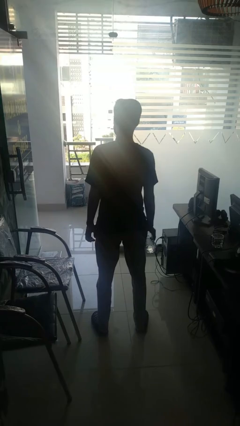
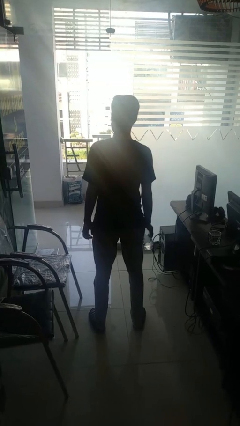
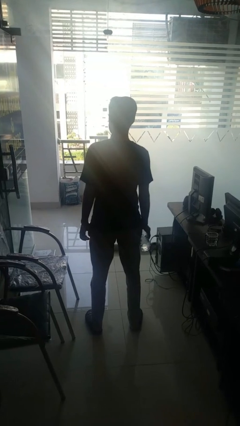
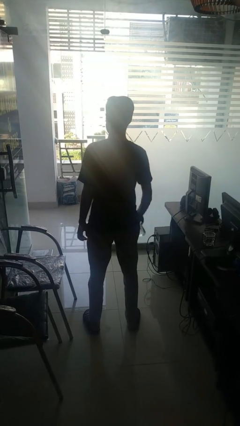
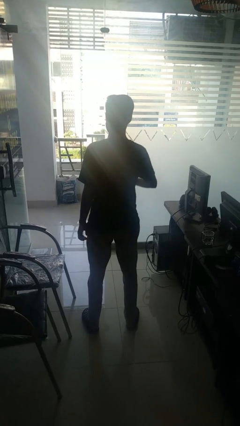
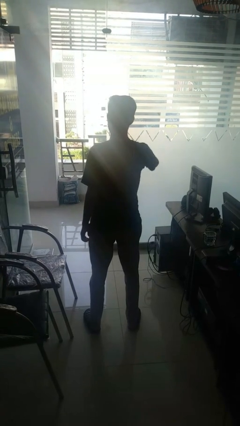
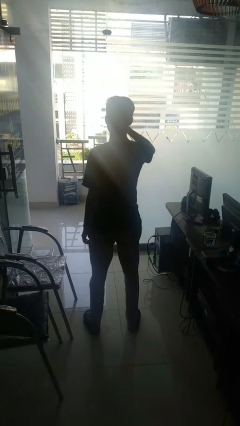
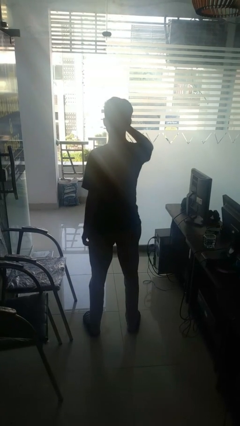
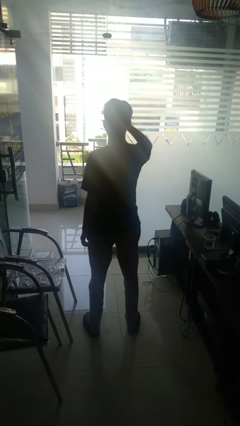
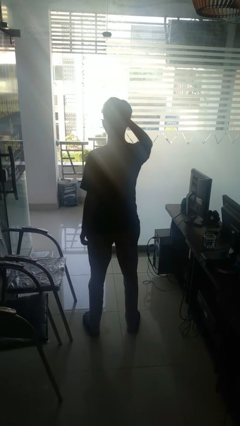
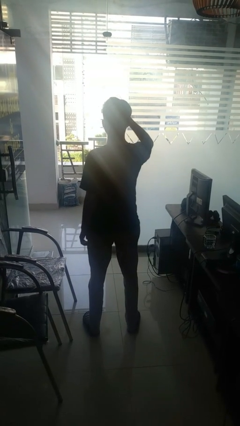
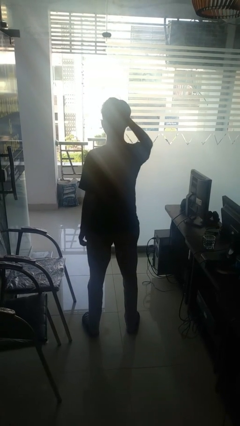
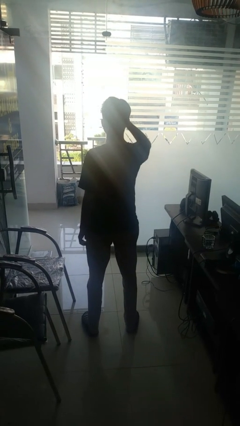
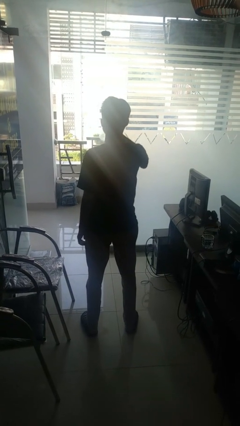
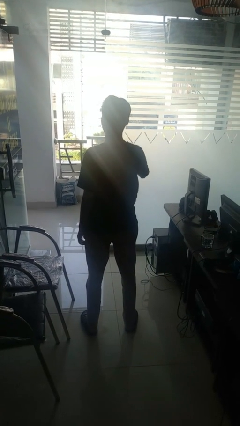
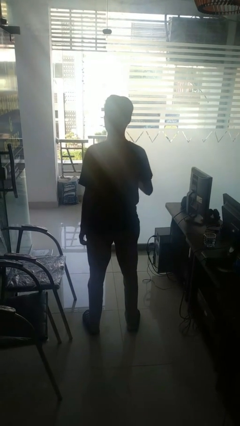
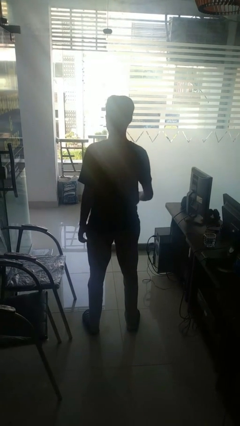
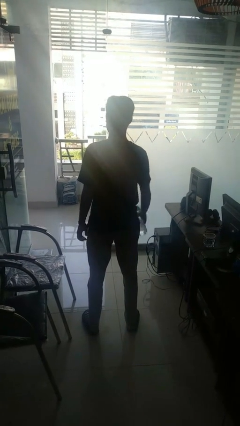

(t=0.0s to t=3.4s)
person drinks from bottle

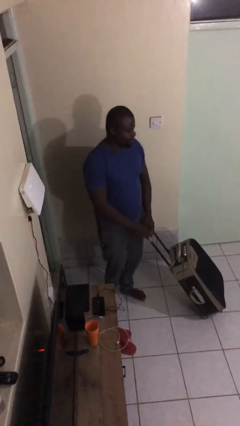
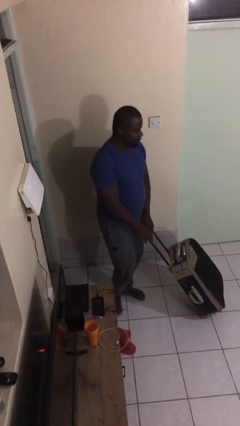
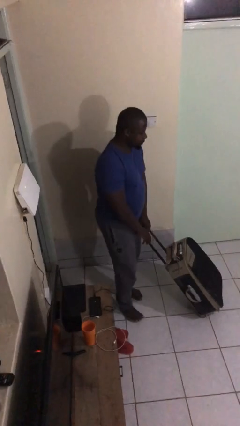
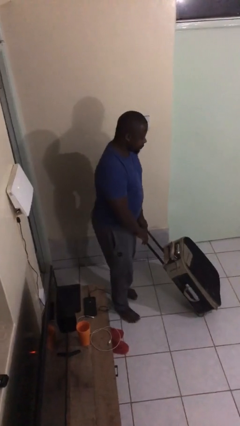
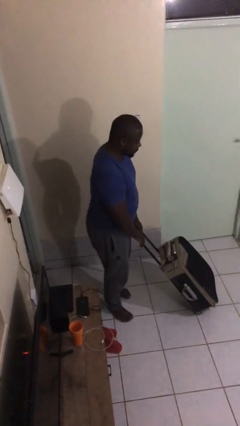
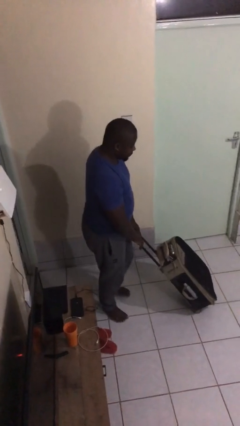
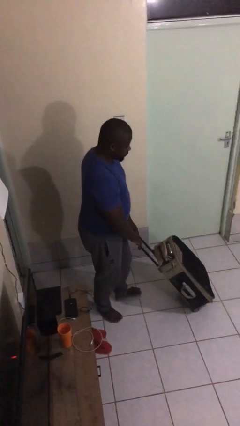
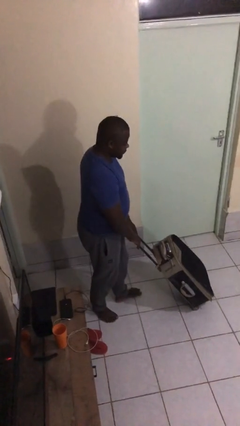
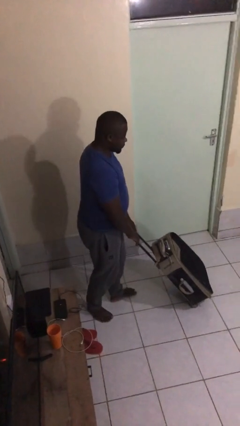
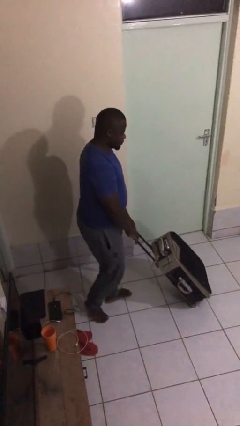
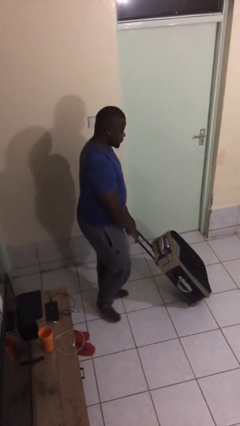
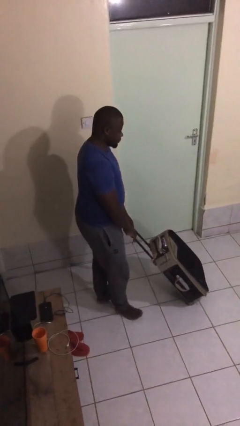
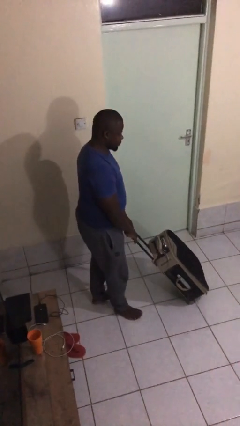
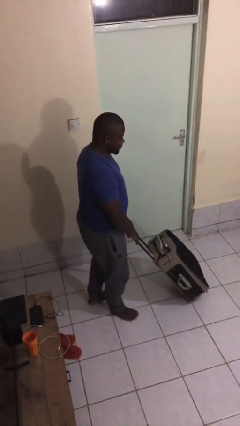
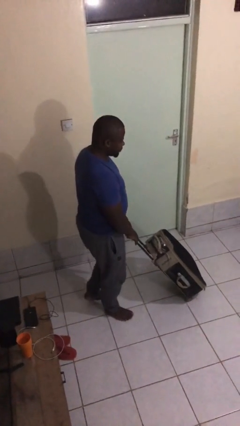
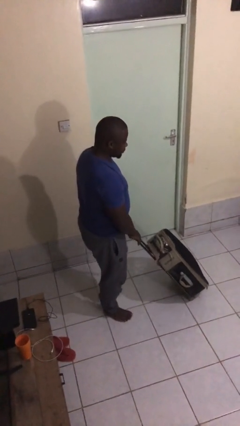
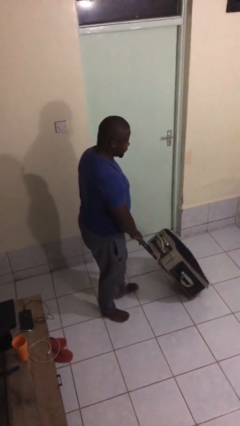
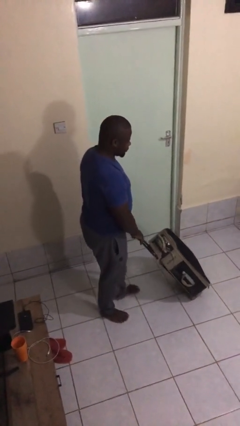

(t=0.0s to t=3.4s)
person pushes wheeled cart

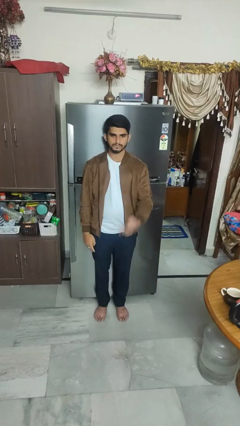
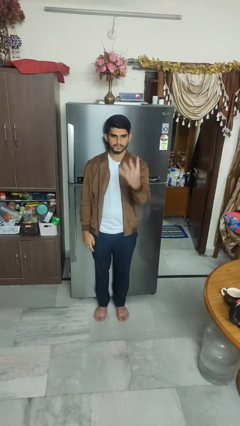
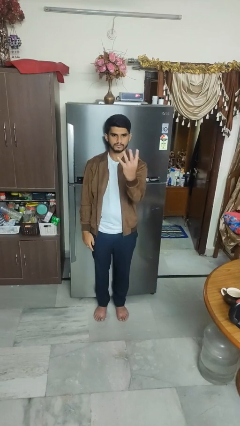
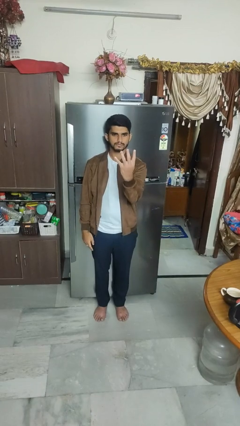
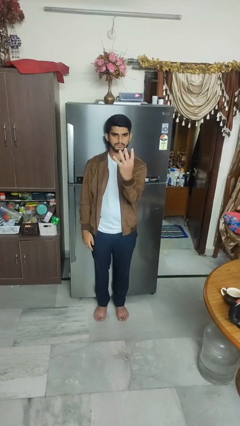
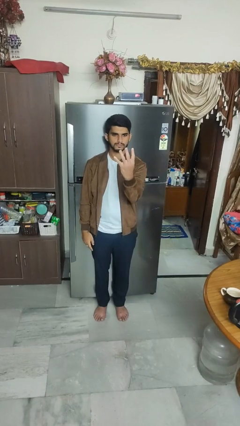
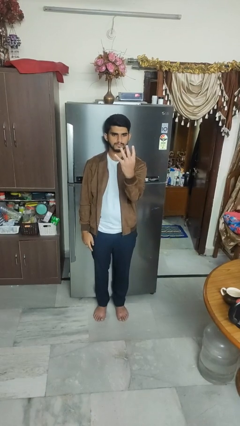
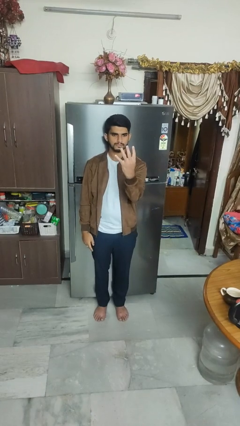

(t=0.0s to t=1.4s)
person gestures number four

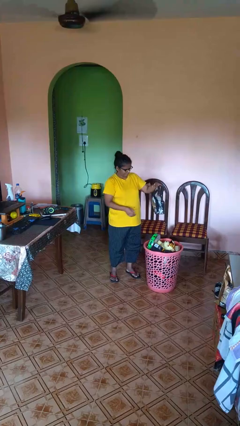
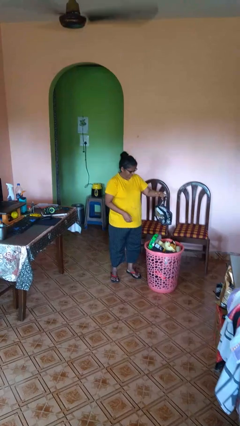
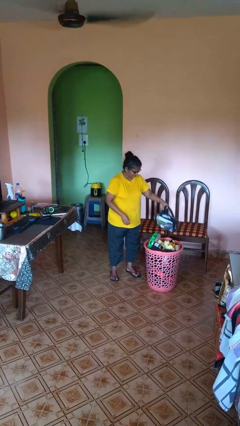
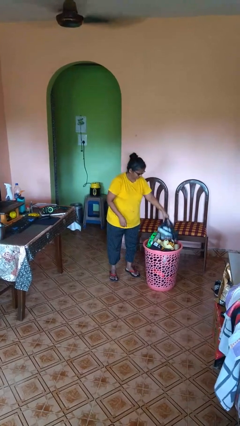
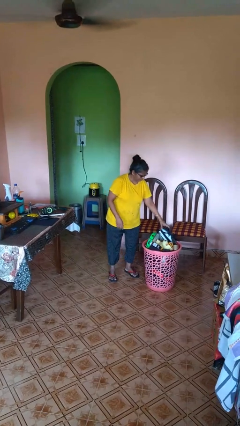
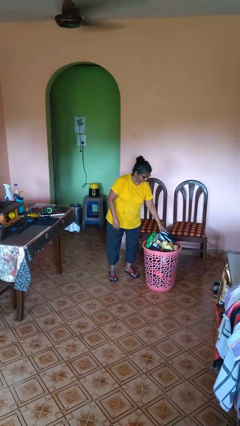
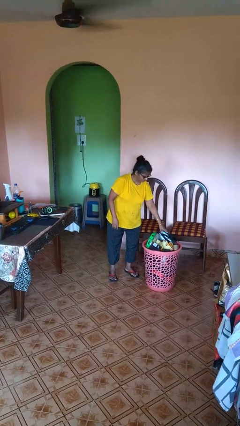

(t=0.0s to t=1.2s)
person puts object into basket

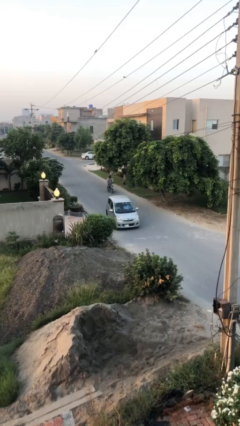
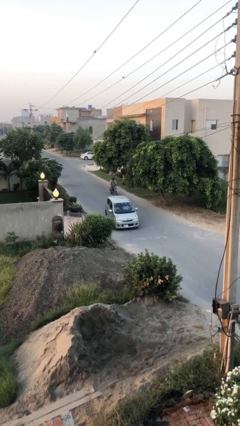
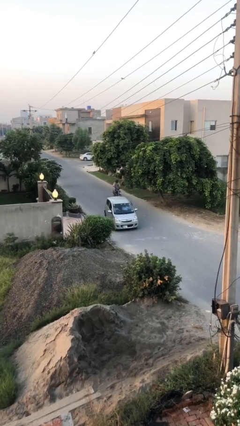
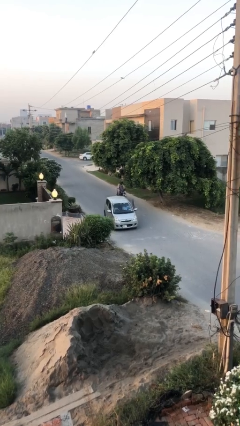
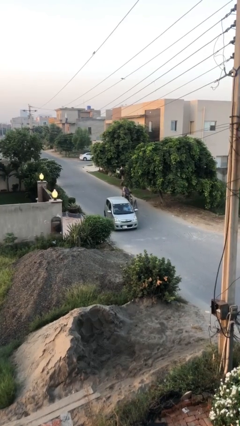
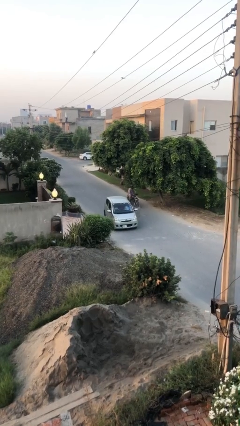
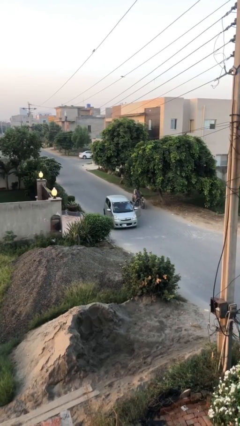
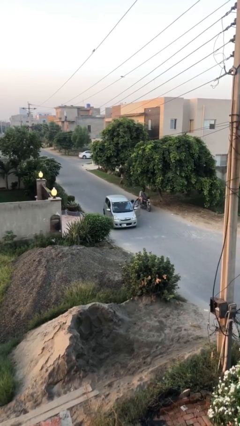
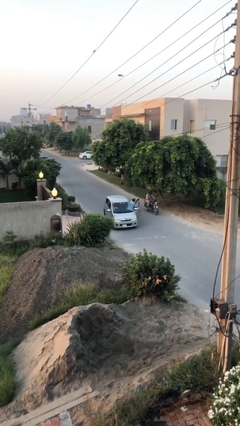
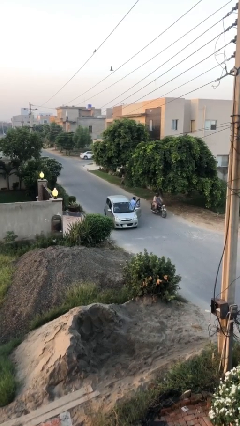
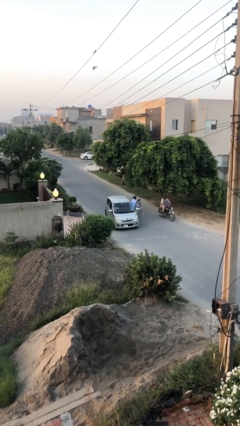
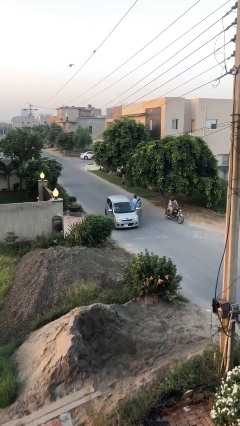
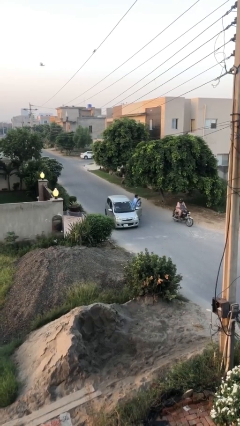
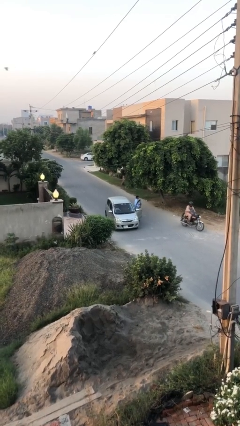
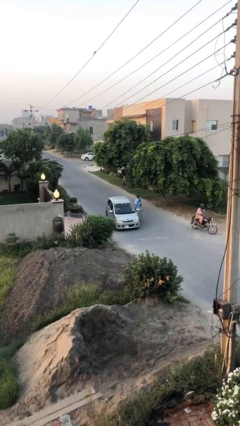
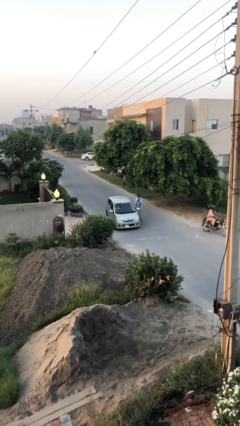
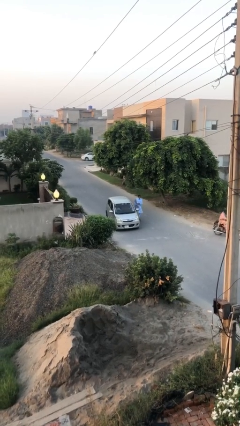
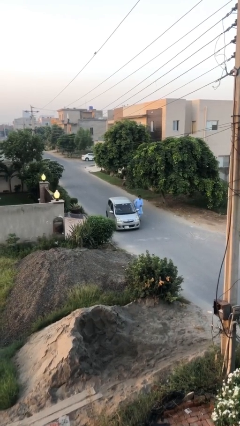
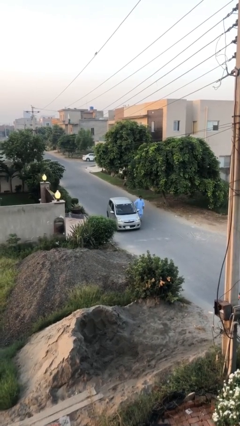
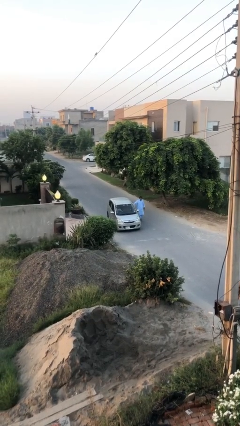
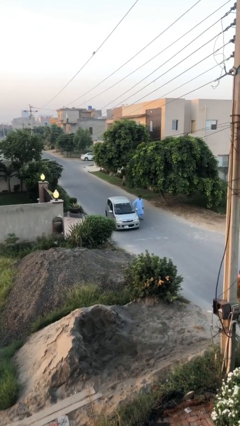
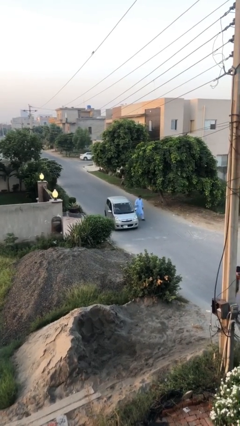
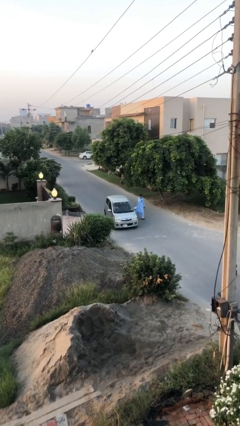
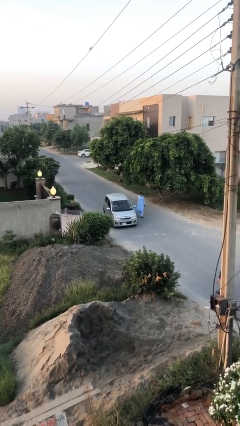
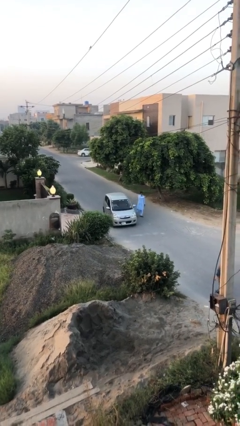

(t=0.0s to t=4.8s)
car drops off person

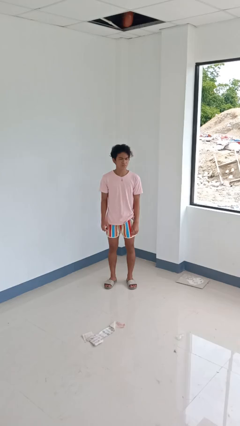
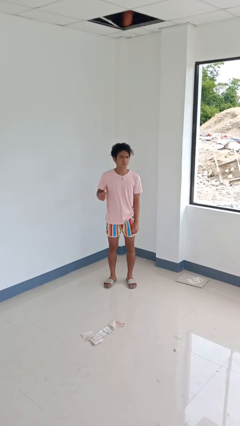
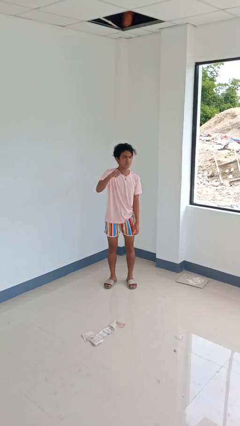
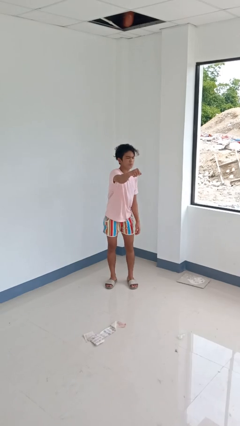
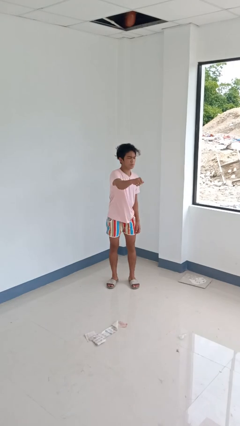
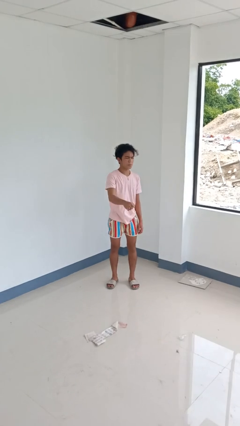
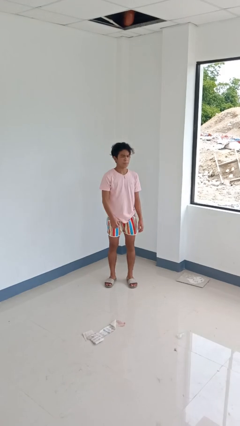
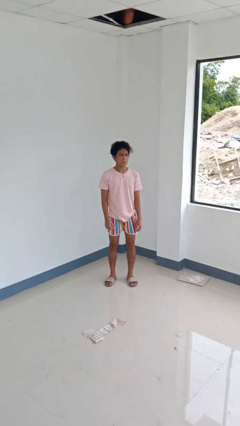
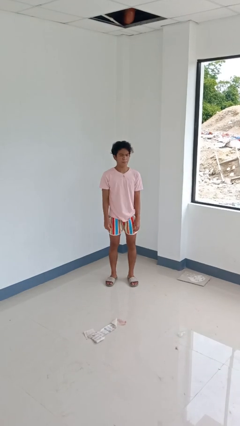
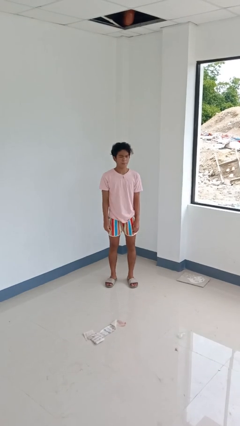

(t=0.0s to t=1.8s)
person punches

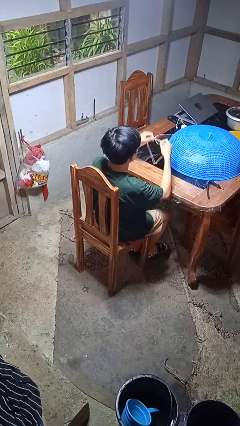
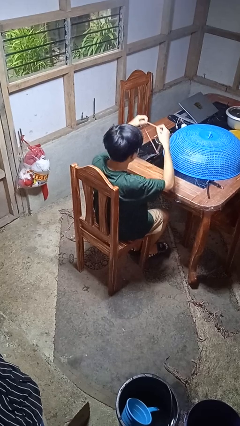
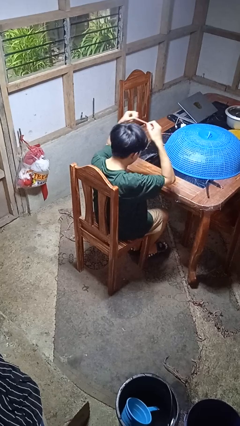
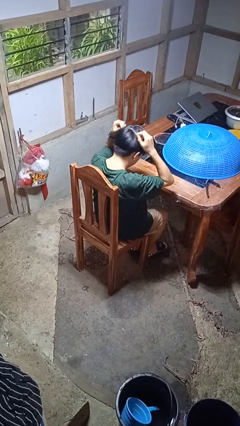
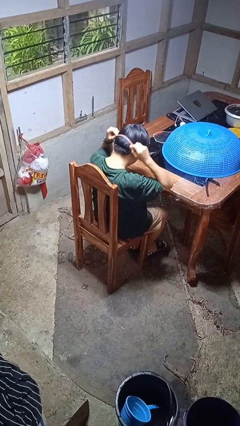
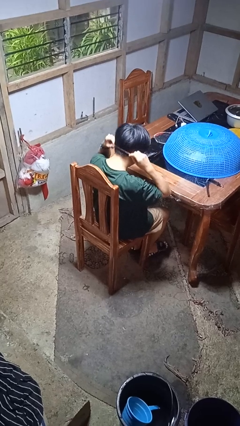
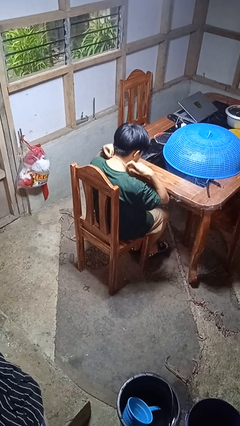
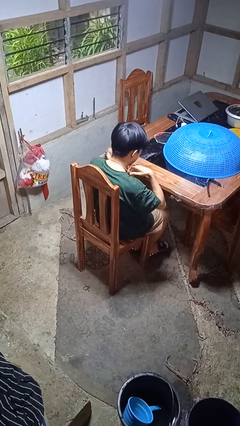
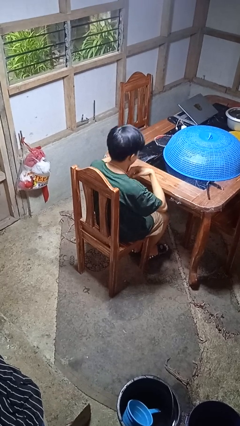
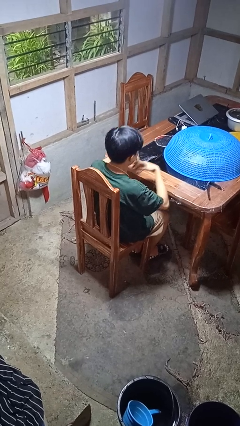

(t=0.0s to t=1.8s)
person puts on necklace
